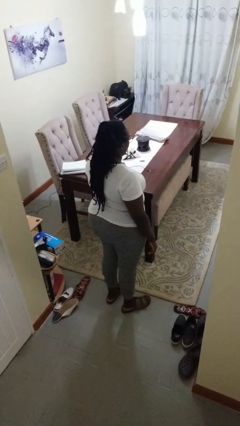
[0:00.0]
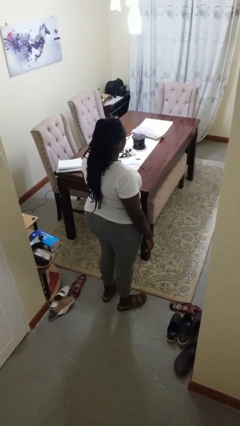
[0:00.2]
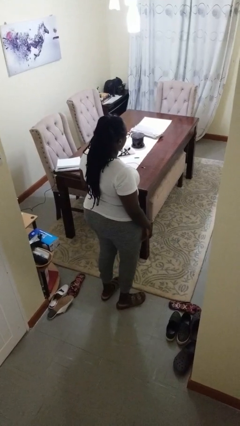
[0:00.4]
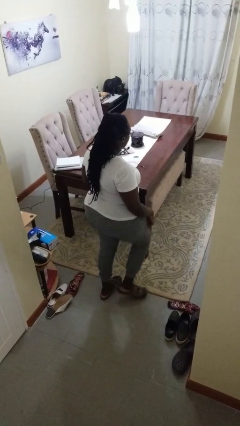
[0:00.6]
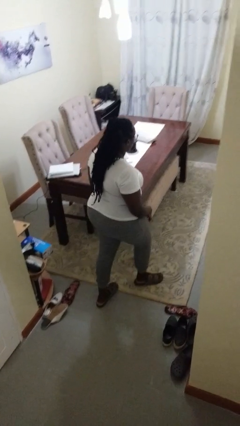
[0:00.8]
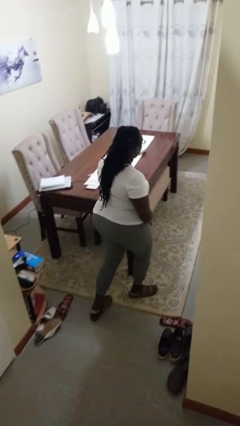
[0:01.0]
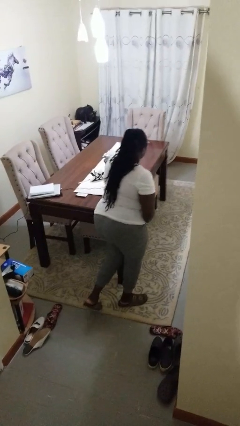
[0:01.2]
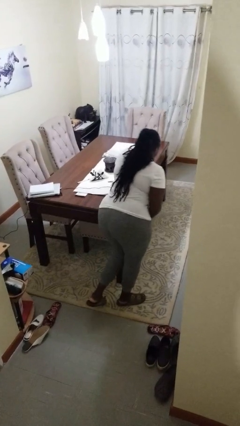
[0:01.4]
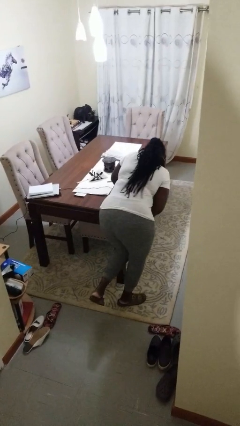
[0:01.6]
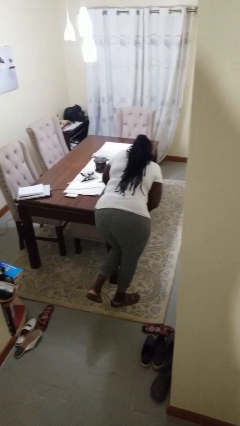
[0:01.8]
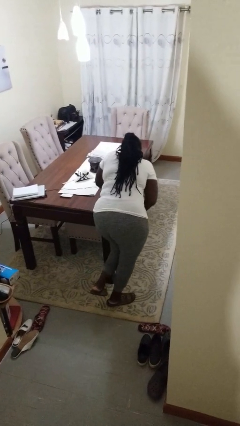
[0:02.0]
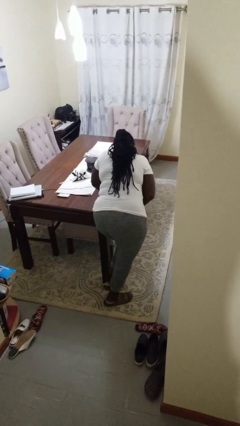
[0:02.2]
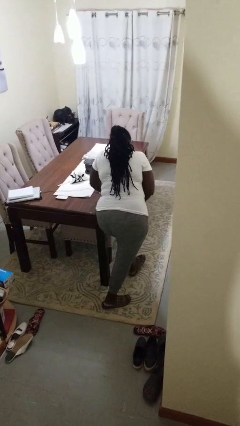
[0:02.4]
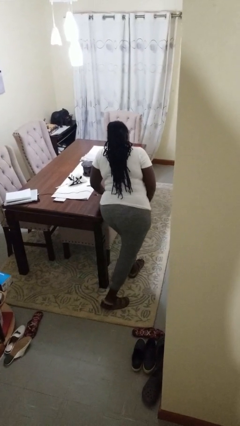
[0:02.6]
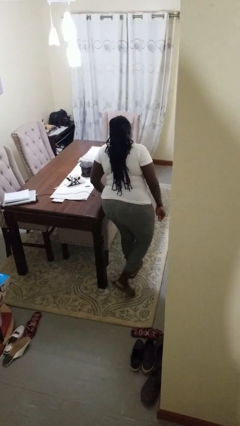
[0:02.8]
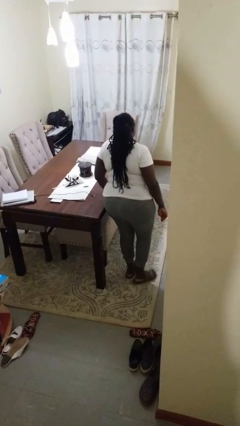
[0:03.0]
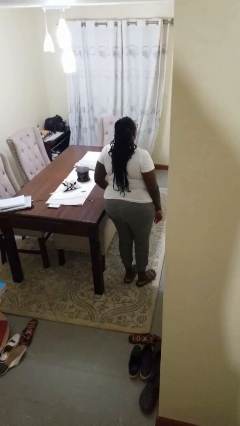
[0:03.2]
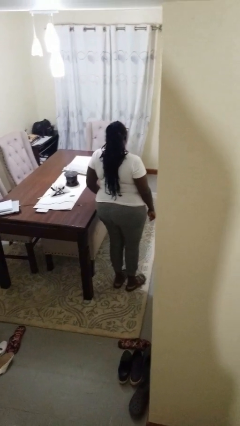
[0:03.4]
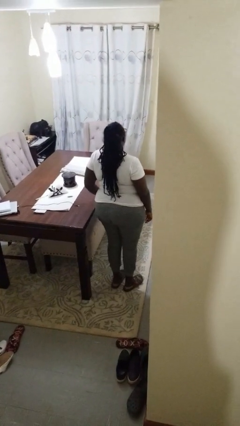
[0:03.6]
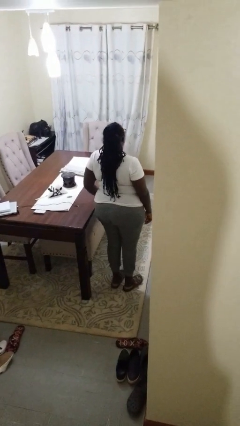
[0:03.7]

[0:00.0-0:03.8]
person bumps into table

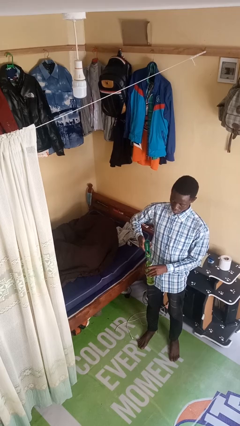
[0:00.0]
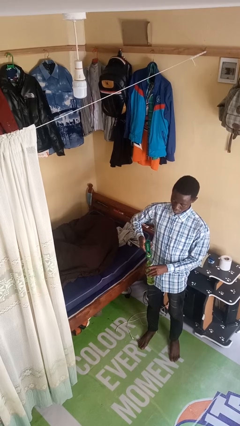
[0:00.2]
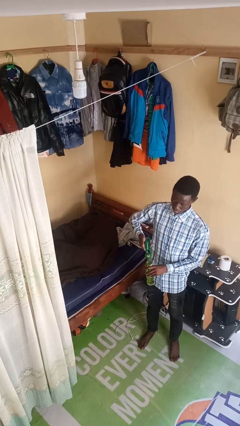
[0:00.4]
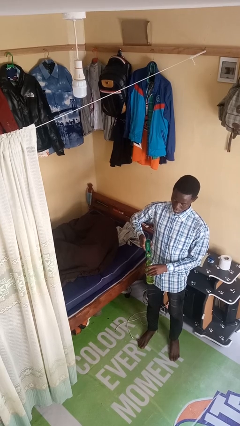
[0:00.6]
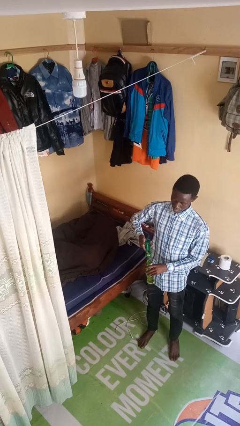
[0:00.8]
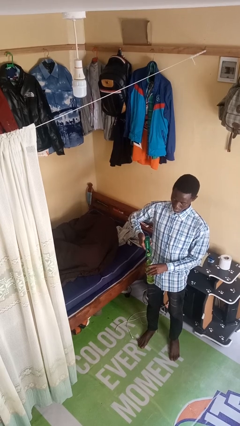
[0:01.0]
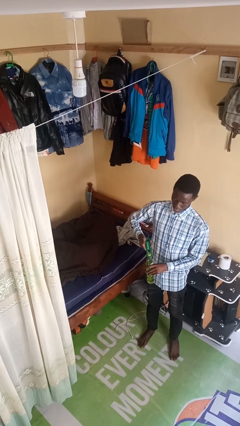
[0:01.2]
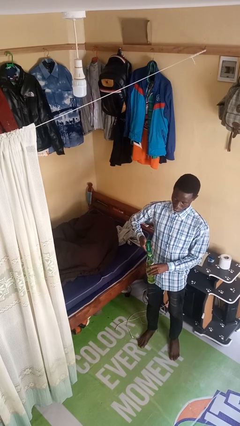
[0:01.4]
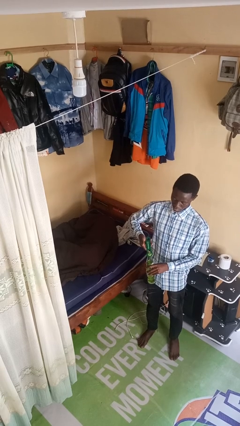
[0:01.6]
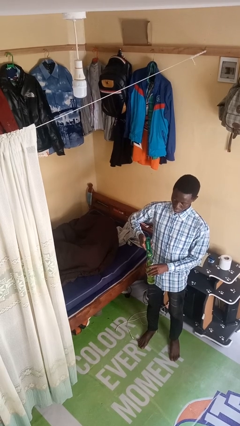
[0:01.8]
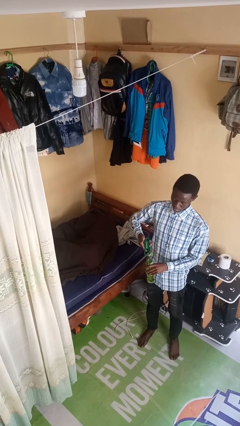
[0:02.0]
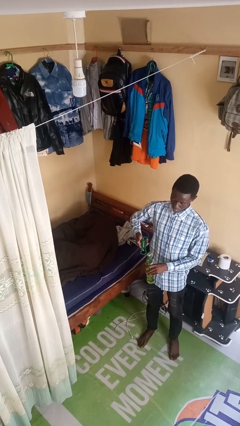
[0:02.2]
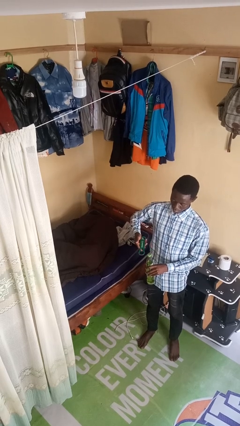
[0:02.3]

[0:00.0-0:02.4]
person opens can with can opener

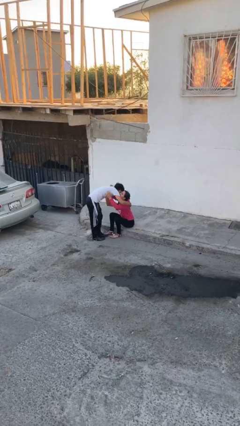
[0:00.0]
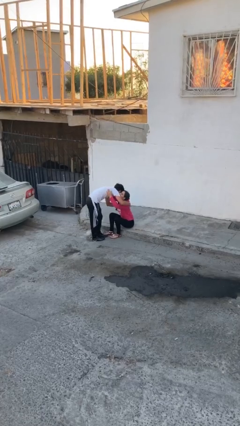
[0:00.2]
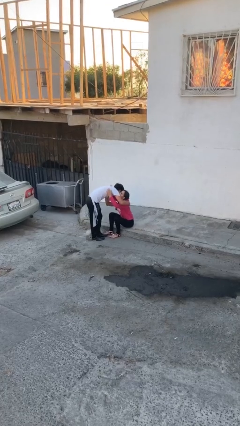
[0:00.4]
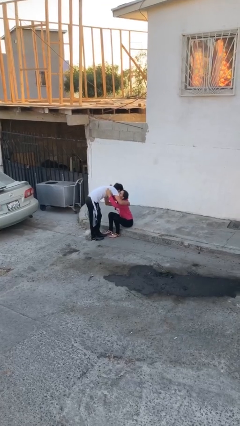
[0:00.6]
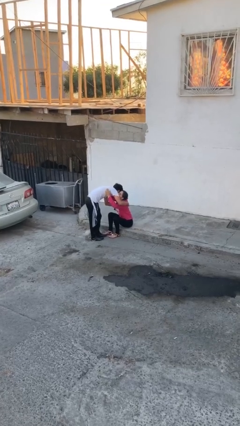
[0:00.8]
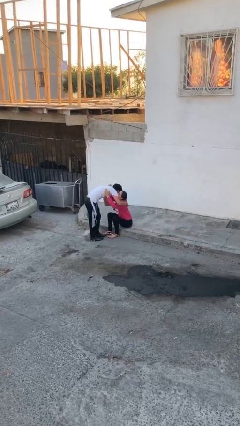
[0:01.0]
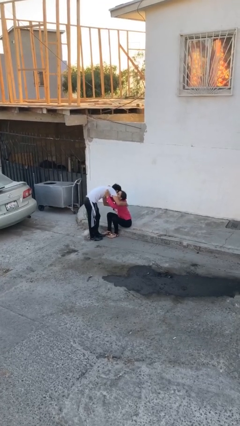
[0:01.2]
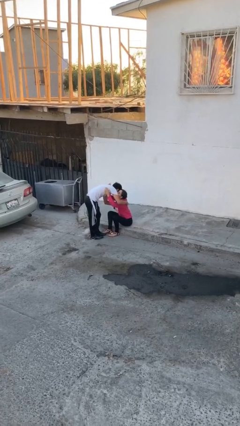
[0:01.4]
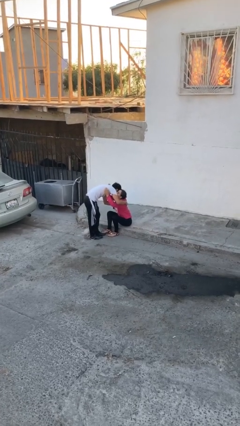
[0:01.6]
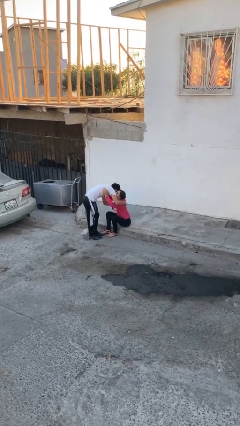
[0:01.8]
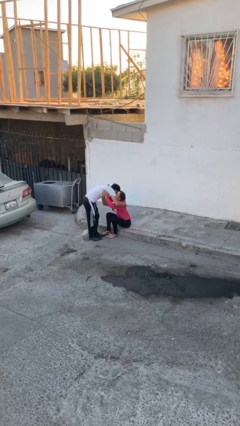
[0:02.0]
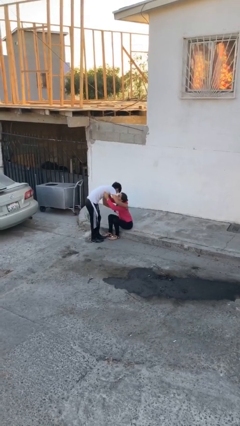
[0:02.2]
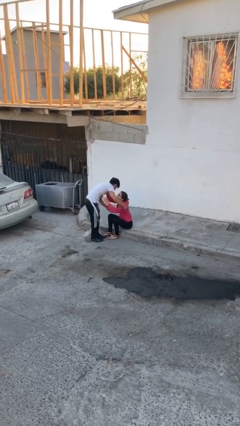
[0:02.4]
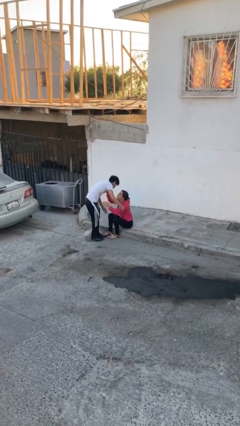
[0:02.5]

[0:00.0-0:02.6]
person embraces person

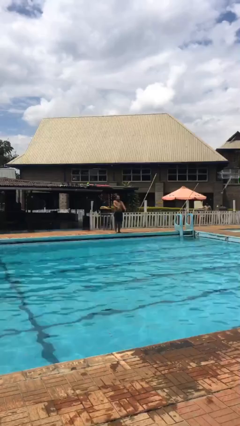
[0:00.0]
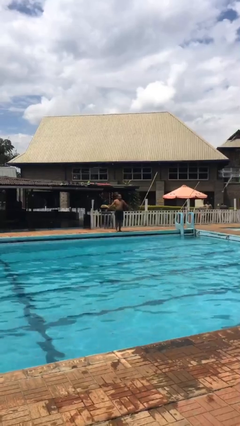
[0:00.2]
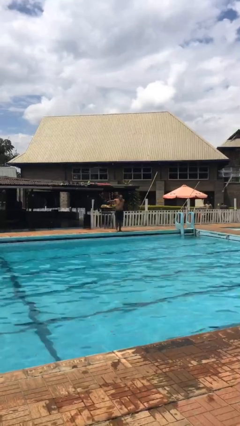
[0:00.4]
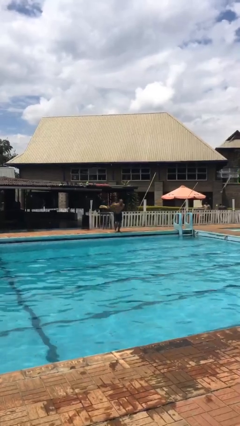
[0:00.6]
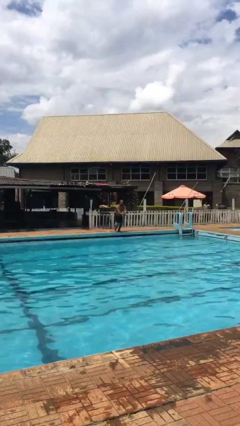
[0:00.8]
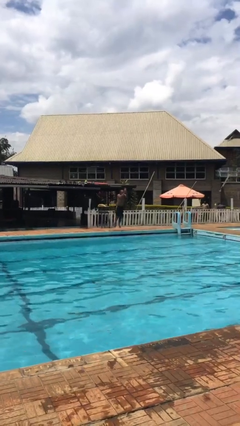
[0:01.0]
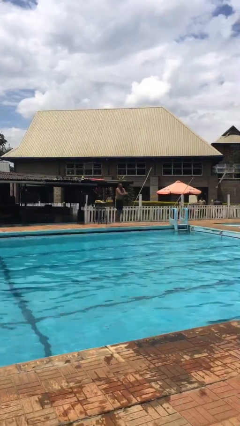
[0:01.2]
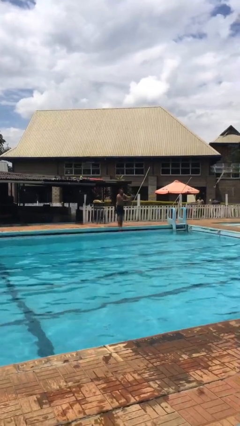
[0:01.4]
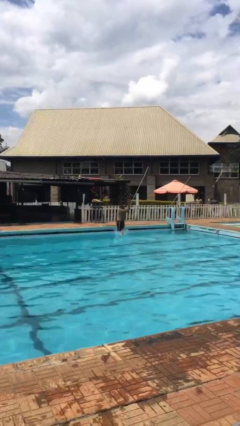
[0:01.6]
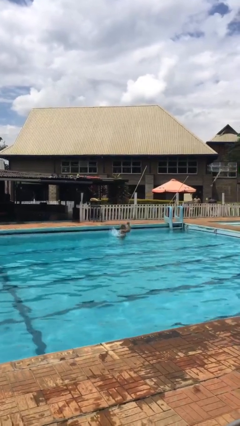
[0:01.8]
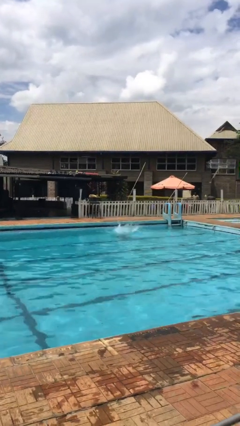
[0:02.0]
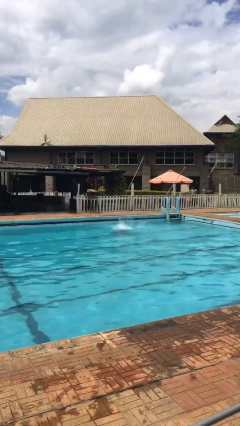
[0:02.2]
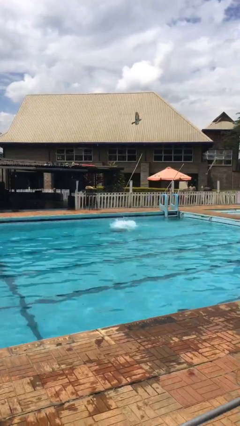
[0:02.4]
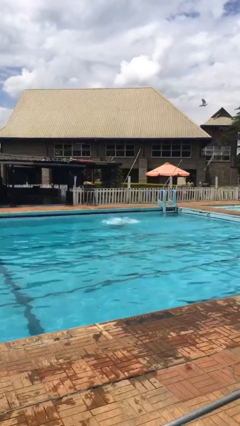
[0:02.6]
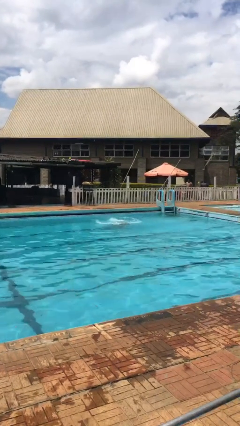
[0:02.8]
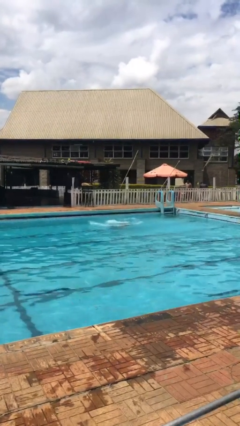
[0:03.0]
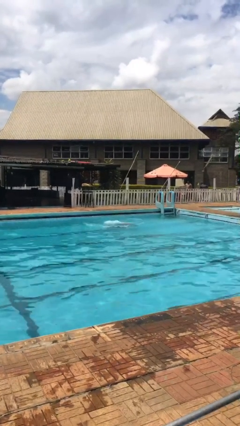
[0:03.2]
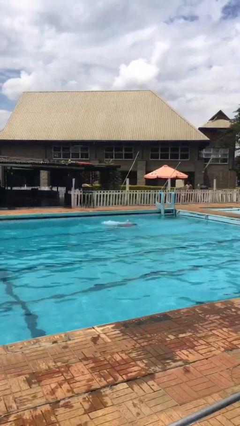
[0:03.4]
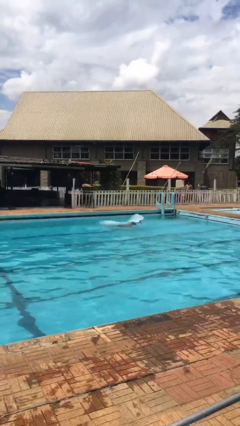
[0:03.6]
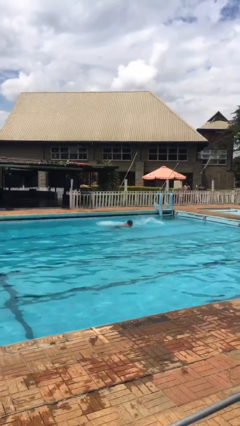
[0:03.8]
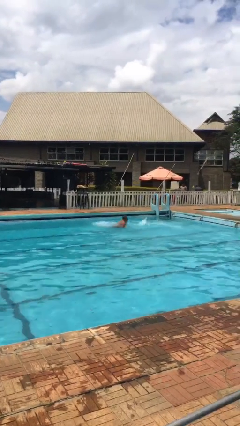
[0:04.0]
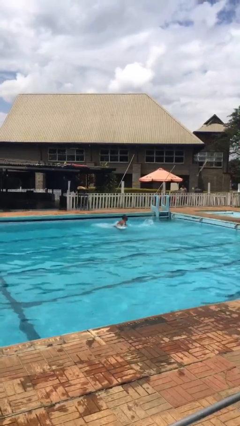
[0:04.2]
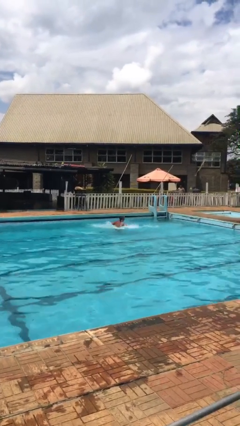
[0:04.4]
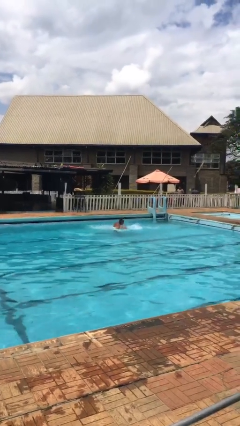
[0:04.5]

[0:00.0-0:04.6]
person jumps into pool

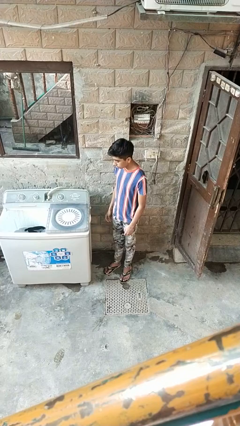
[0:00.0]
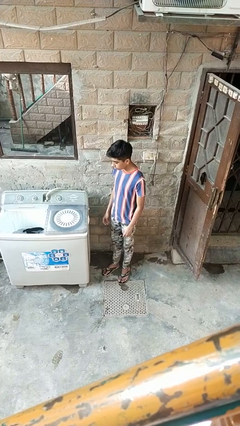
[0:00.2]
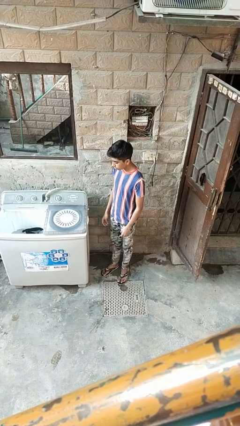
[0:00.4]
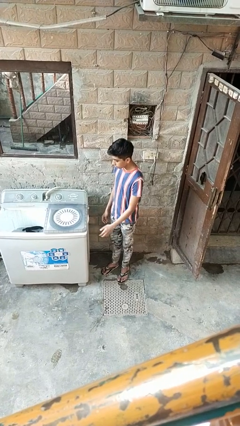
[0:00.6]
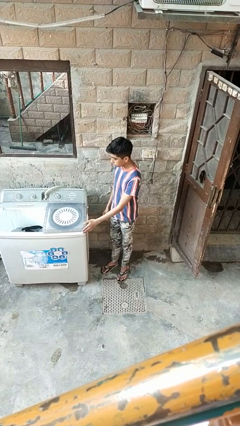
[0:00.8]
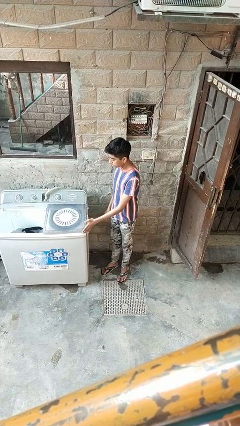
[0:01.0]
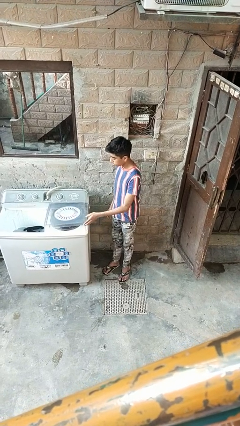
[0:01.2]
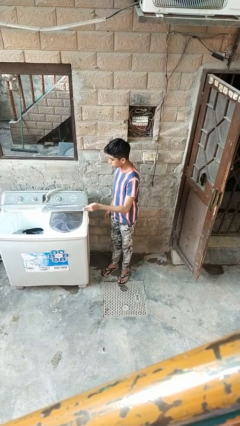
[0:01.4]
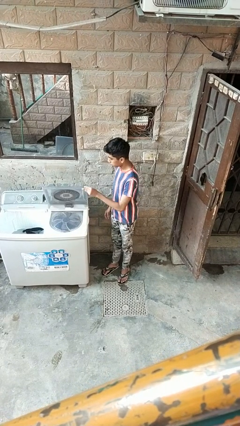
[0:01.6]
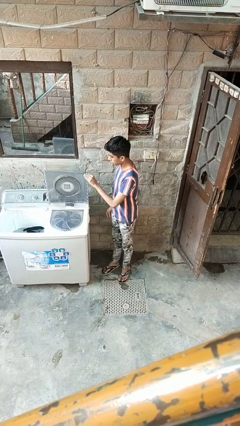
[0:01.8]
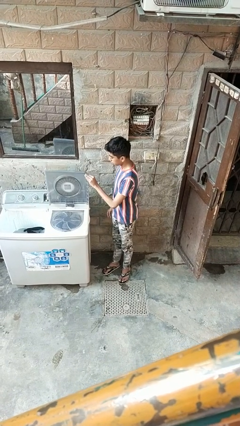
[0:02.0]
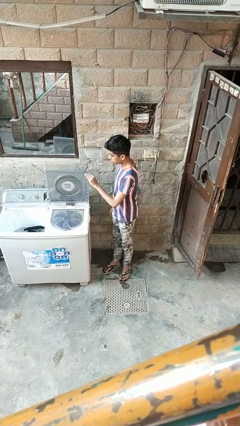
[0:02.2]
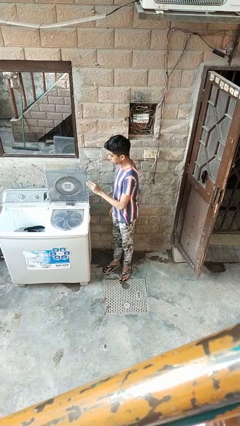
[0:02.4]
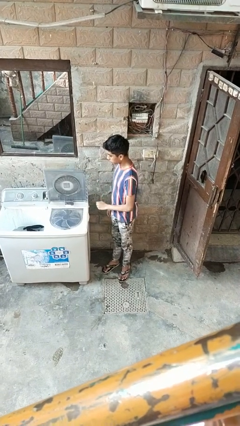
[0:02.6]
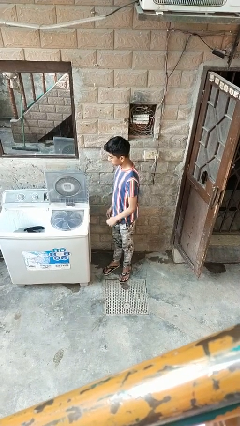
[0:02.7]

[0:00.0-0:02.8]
person opens clothes washer

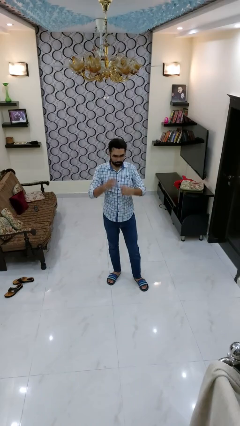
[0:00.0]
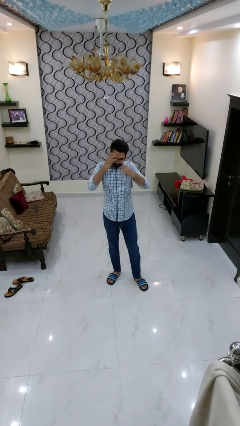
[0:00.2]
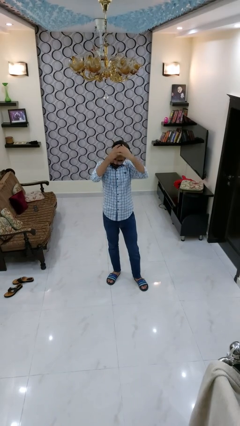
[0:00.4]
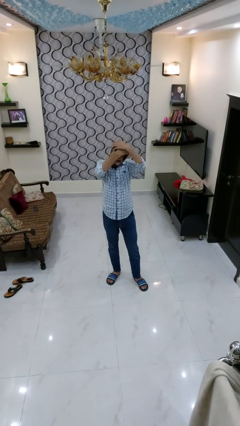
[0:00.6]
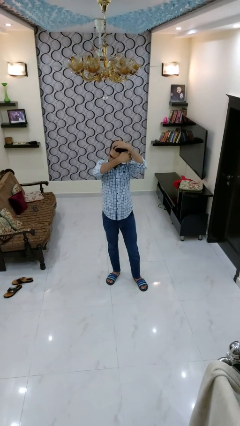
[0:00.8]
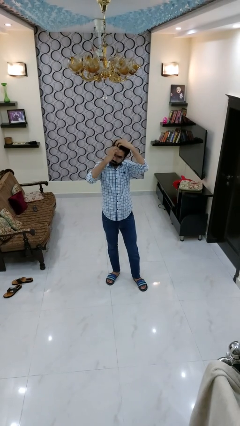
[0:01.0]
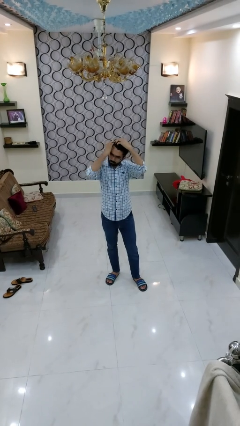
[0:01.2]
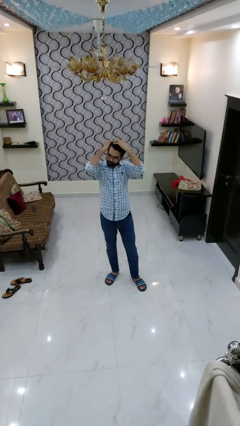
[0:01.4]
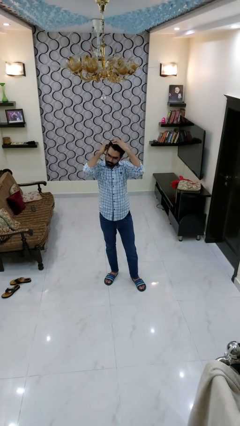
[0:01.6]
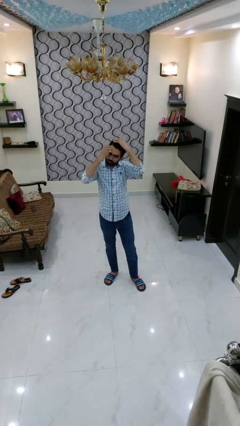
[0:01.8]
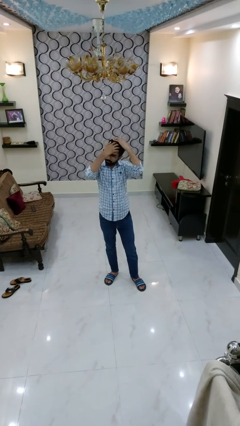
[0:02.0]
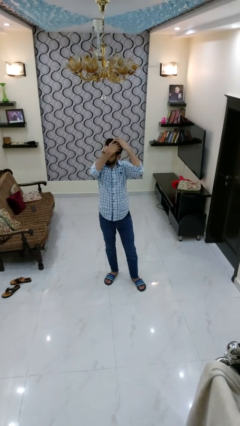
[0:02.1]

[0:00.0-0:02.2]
person strokes hair
